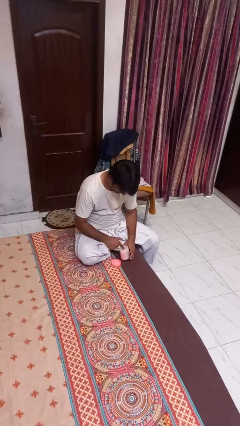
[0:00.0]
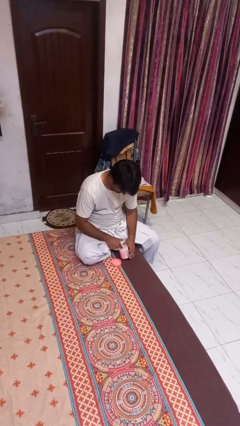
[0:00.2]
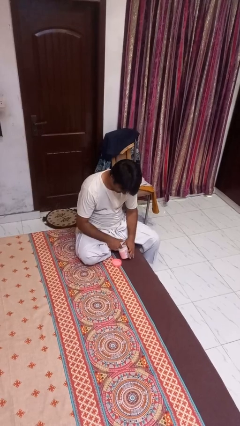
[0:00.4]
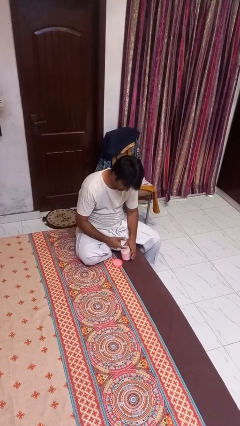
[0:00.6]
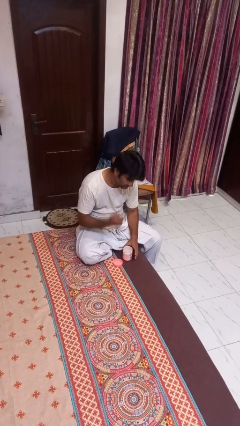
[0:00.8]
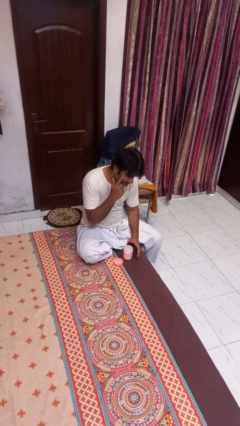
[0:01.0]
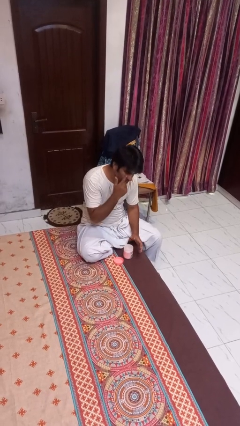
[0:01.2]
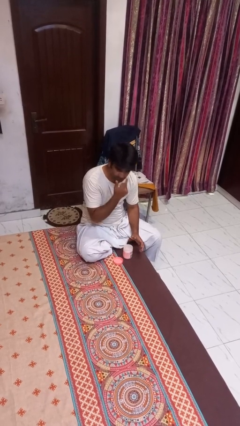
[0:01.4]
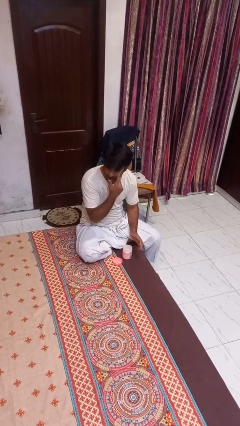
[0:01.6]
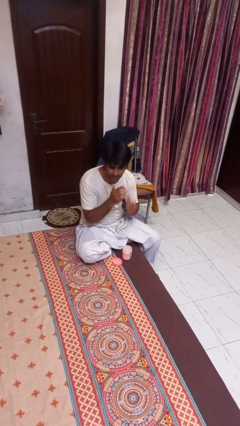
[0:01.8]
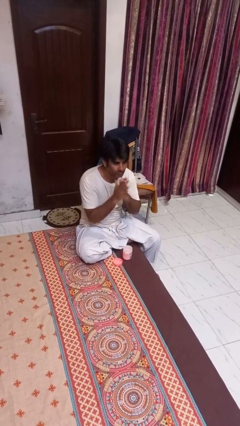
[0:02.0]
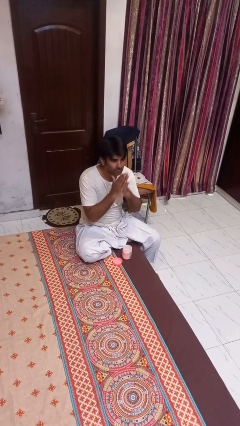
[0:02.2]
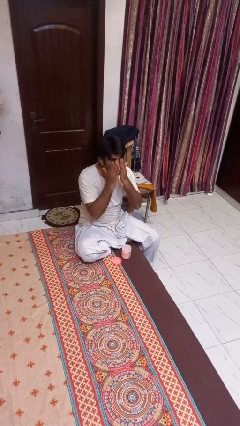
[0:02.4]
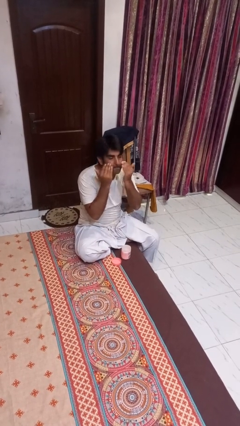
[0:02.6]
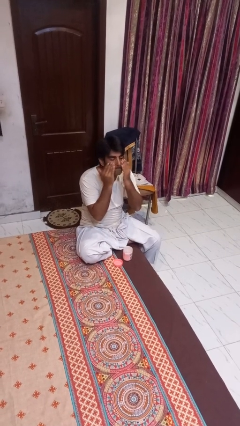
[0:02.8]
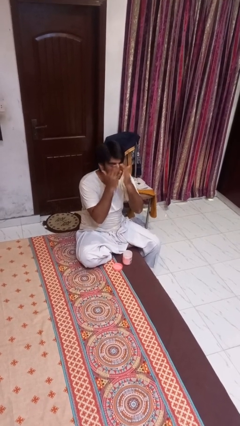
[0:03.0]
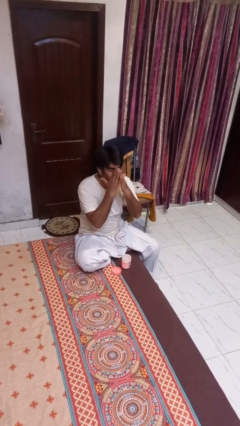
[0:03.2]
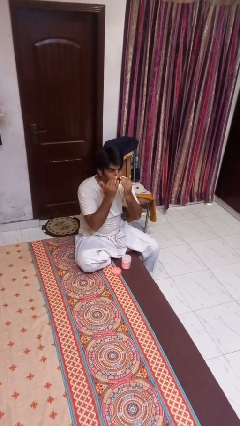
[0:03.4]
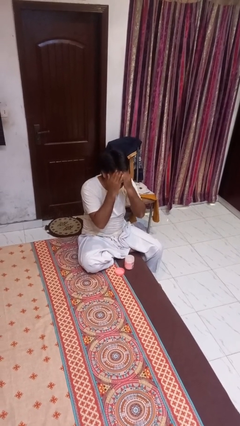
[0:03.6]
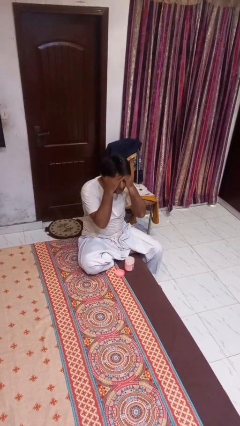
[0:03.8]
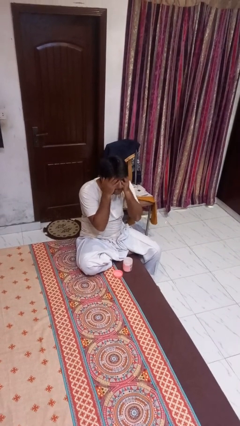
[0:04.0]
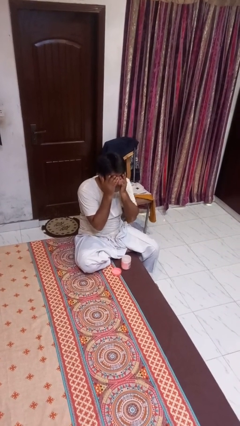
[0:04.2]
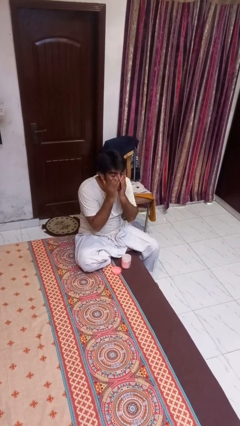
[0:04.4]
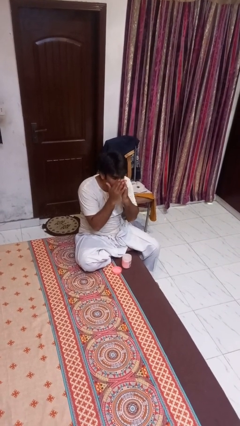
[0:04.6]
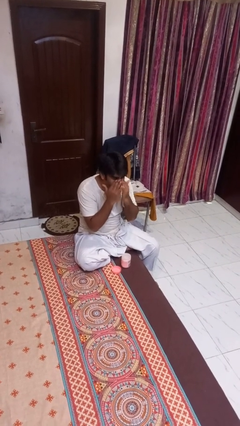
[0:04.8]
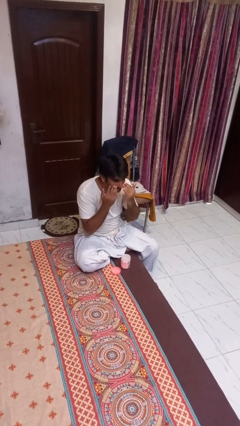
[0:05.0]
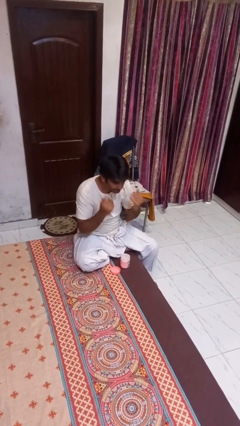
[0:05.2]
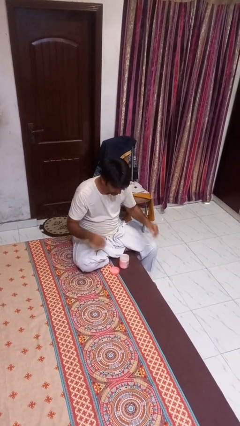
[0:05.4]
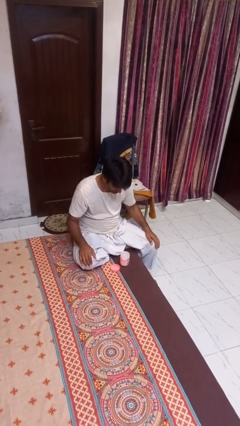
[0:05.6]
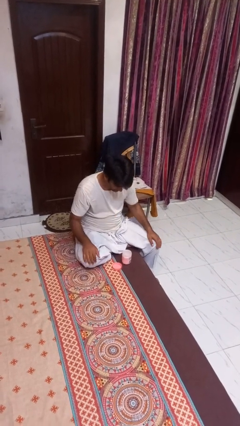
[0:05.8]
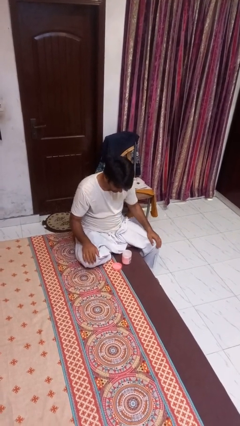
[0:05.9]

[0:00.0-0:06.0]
person applies facial moisturizer

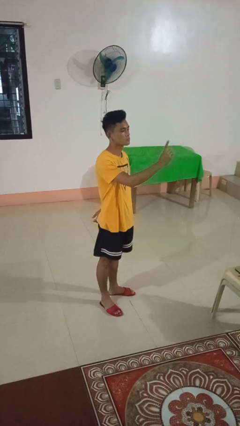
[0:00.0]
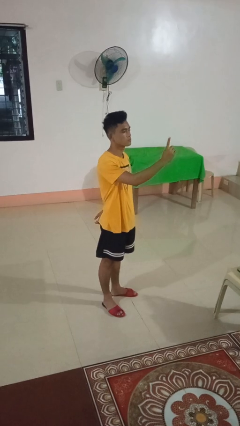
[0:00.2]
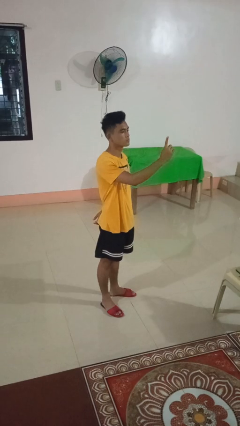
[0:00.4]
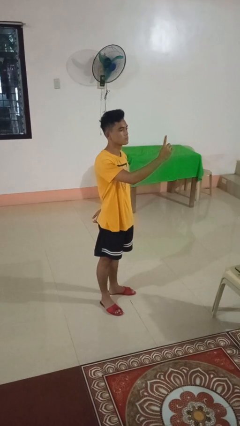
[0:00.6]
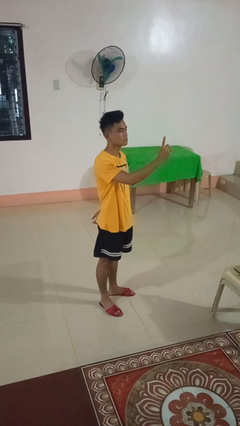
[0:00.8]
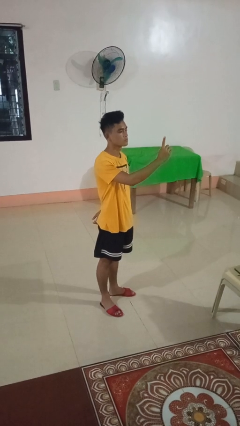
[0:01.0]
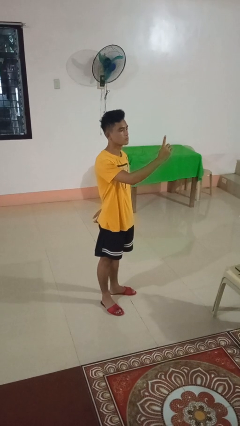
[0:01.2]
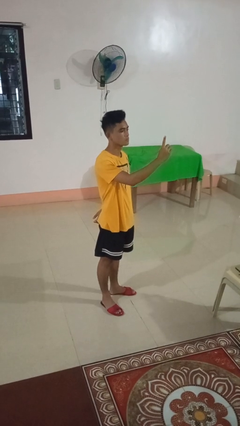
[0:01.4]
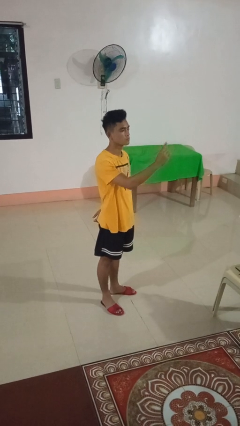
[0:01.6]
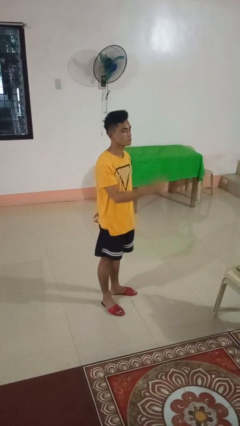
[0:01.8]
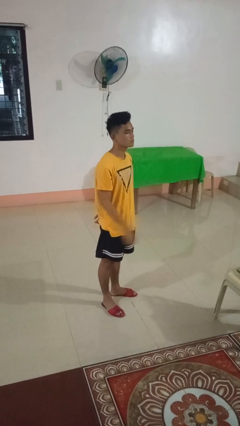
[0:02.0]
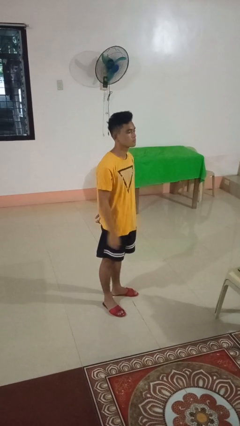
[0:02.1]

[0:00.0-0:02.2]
person gestures number one

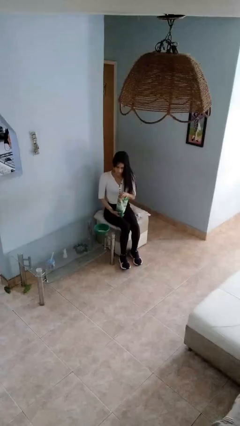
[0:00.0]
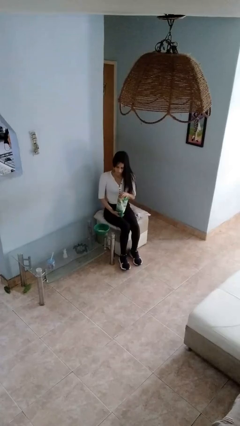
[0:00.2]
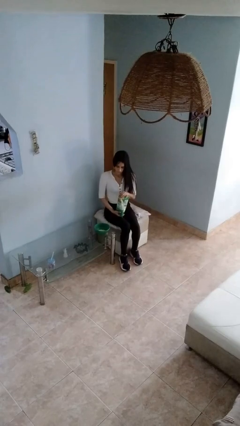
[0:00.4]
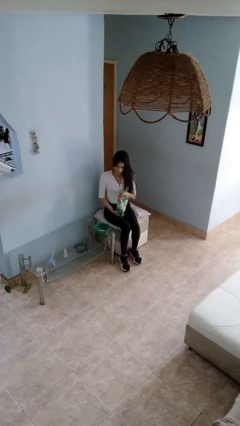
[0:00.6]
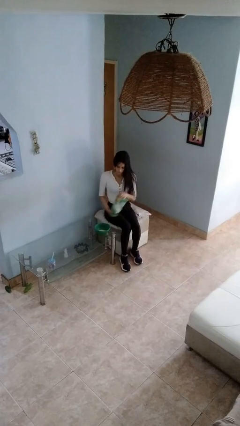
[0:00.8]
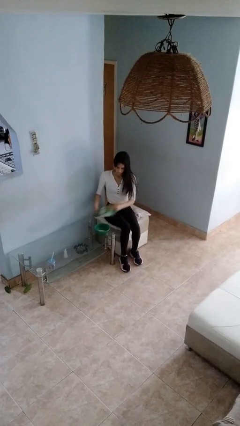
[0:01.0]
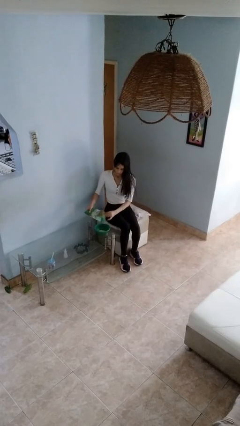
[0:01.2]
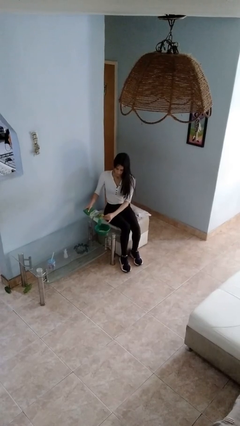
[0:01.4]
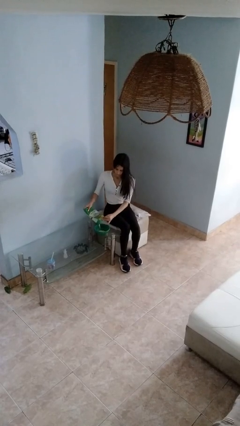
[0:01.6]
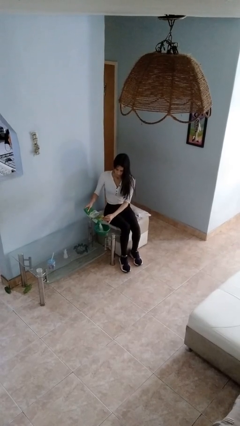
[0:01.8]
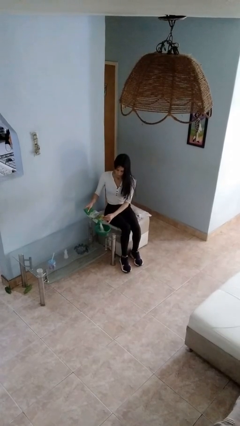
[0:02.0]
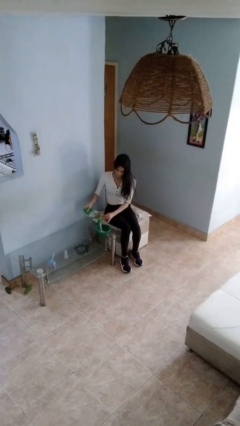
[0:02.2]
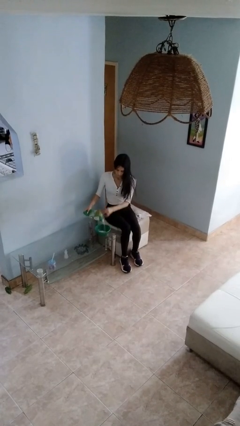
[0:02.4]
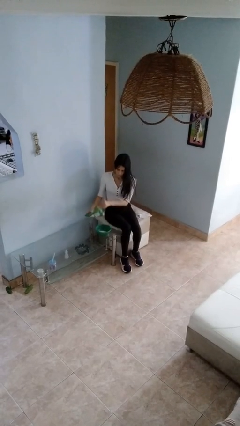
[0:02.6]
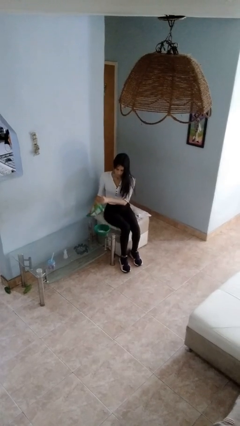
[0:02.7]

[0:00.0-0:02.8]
person pours into bowl

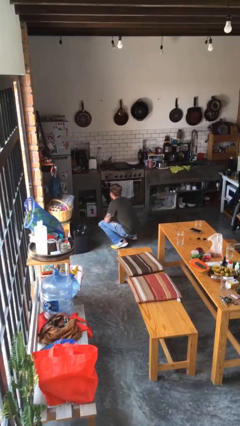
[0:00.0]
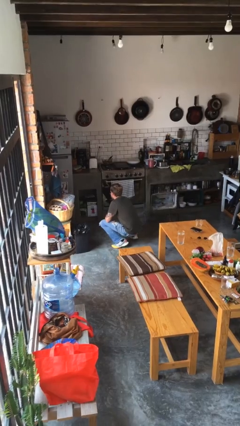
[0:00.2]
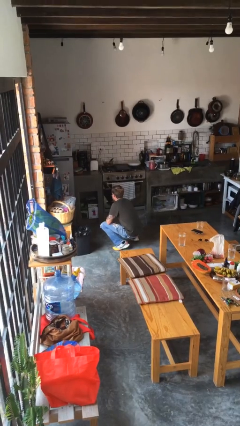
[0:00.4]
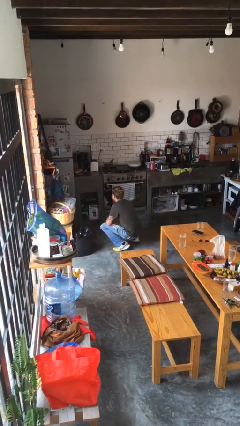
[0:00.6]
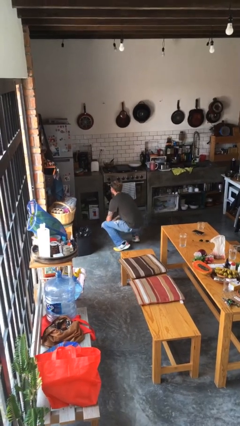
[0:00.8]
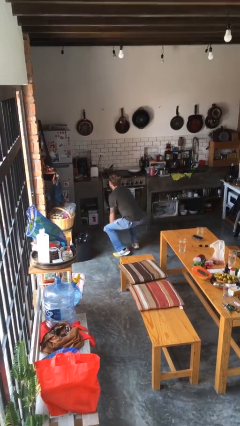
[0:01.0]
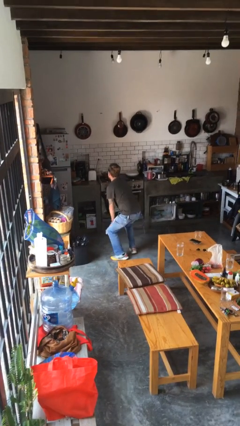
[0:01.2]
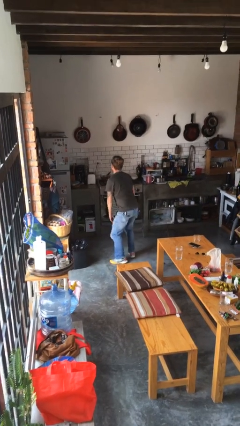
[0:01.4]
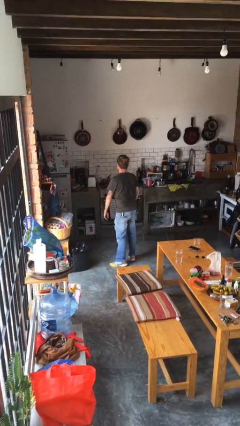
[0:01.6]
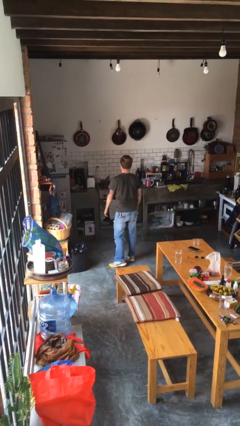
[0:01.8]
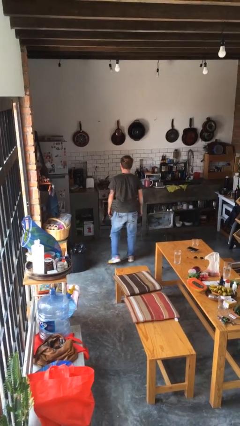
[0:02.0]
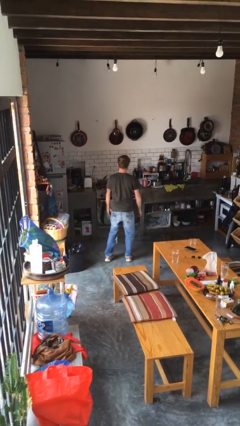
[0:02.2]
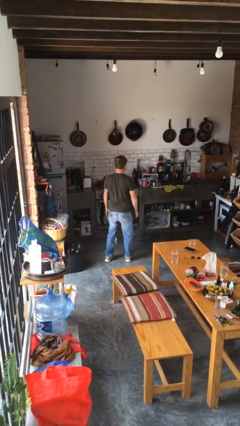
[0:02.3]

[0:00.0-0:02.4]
person stands up

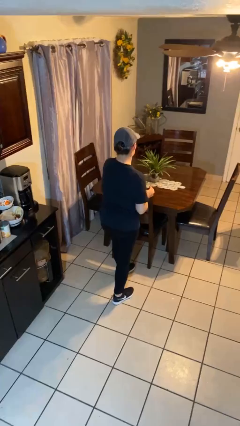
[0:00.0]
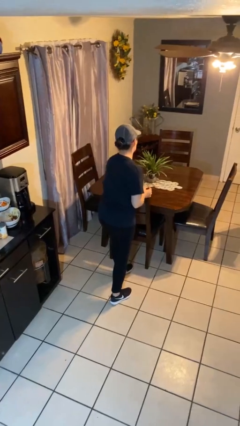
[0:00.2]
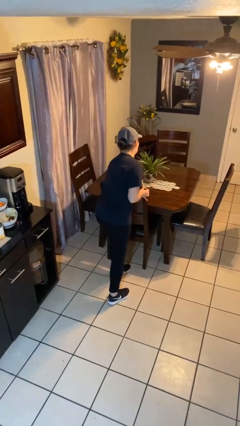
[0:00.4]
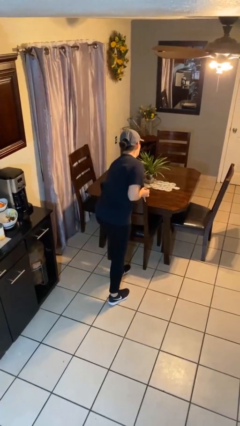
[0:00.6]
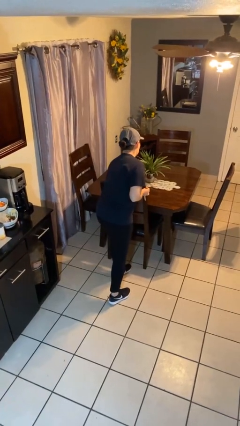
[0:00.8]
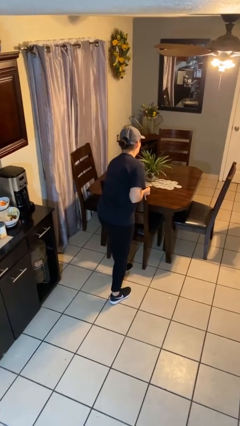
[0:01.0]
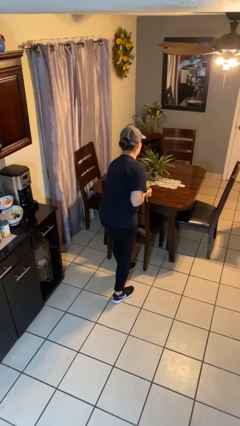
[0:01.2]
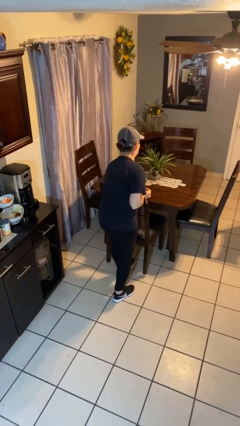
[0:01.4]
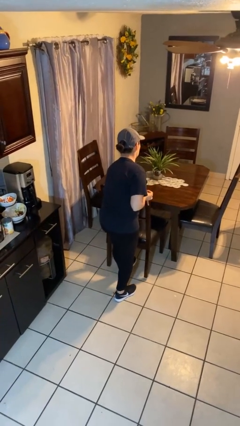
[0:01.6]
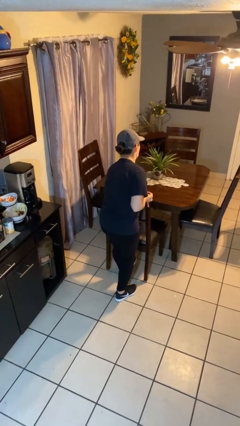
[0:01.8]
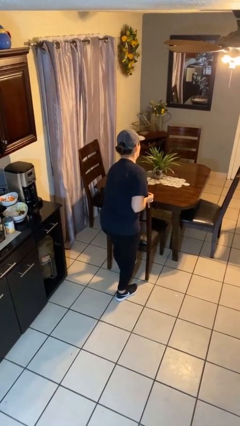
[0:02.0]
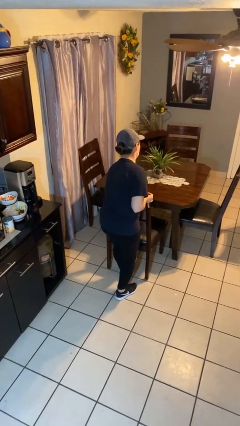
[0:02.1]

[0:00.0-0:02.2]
person pulls out chair

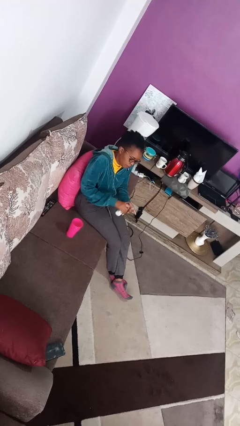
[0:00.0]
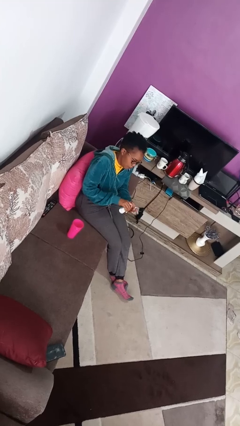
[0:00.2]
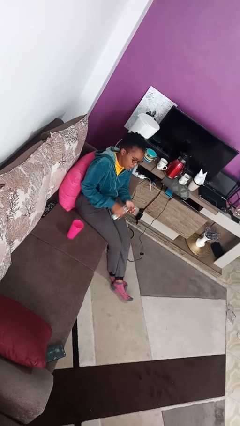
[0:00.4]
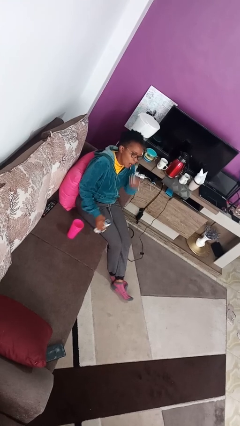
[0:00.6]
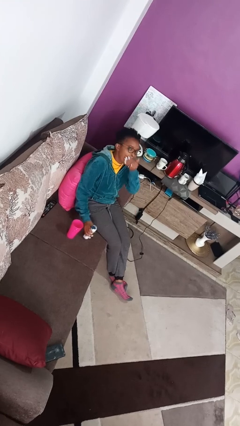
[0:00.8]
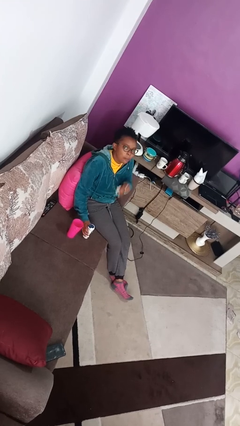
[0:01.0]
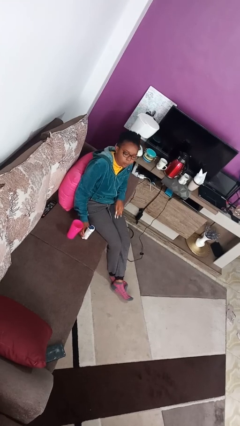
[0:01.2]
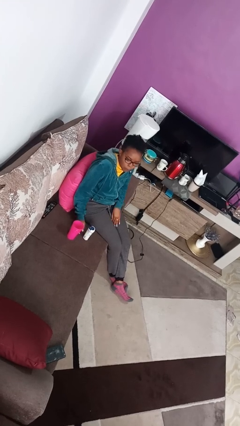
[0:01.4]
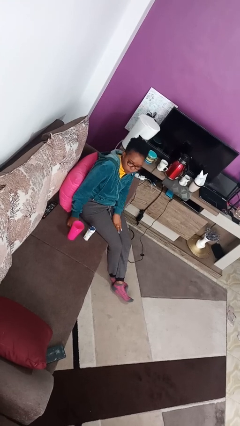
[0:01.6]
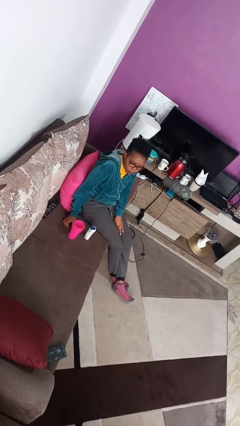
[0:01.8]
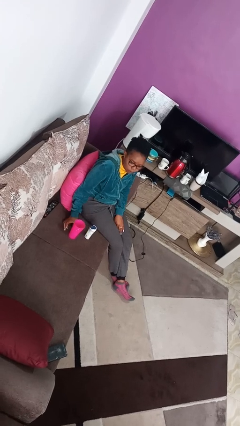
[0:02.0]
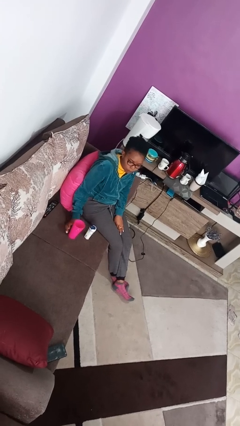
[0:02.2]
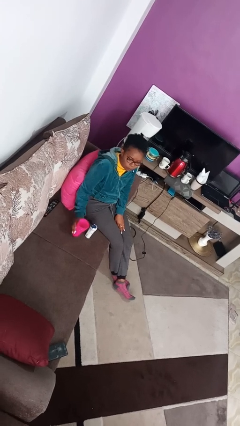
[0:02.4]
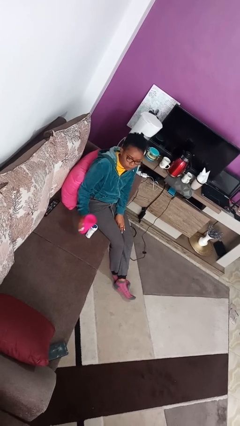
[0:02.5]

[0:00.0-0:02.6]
person takes medicine pills
